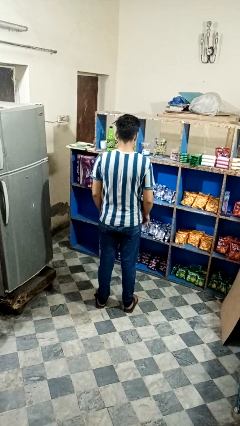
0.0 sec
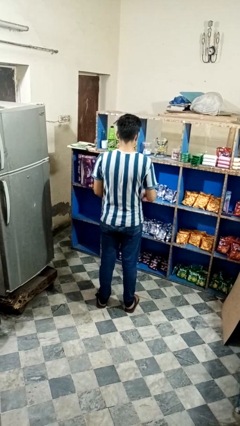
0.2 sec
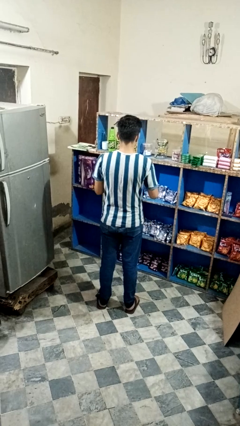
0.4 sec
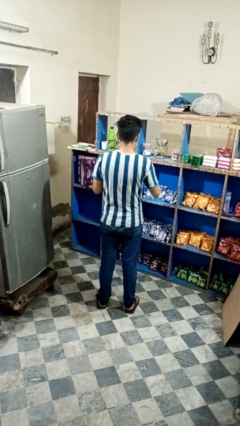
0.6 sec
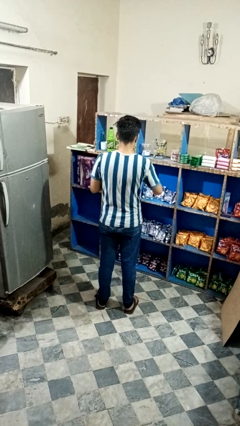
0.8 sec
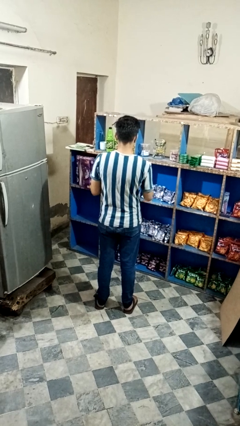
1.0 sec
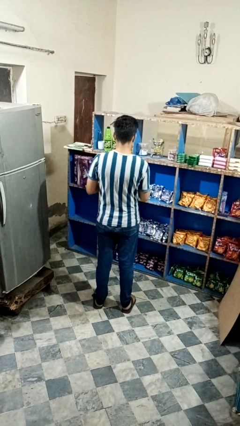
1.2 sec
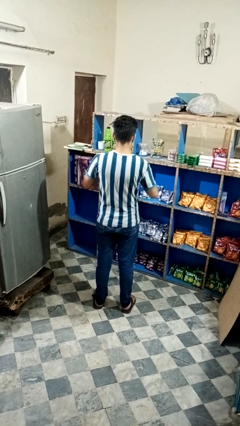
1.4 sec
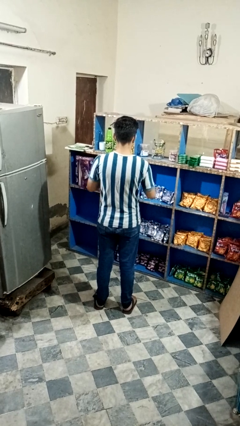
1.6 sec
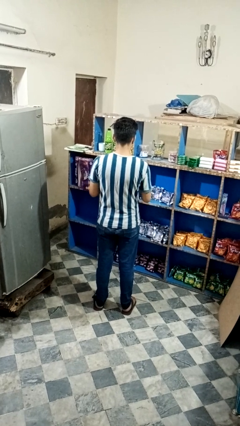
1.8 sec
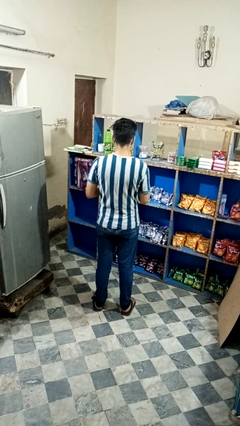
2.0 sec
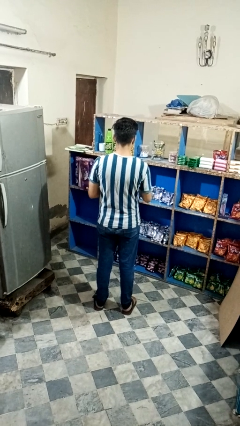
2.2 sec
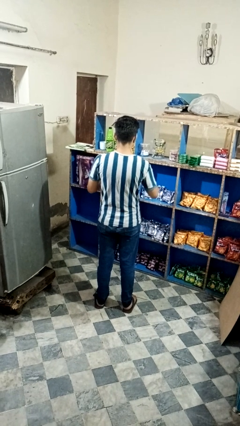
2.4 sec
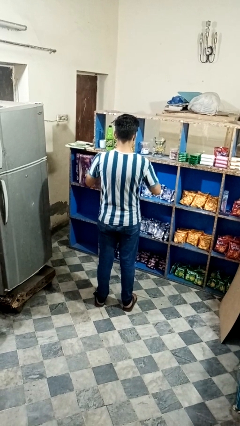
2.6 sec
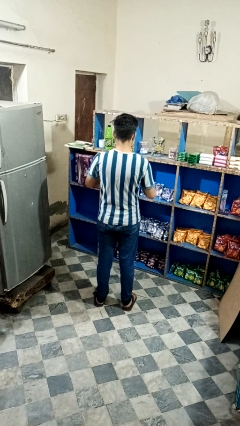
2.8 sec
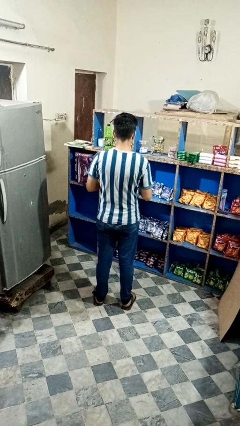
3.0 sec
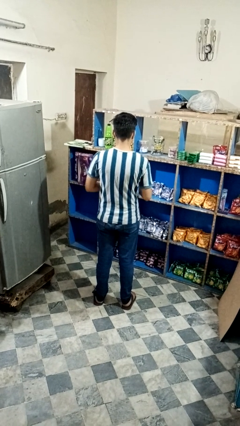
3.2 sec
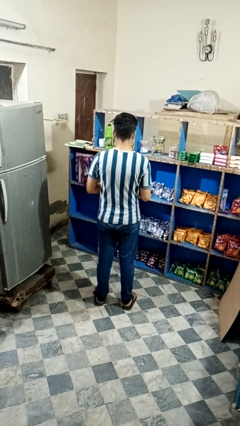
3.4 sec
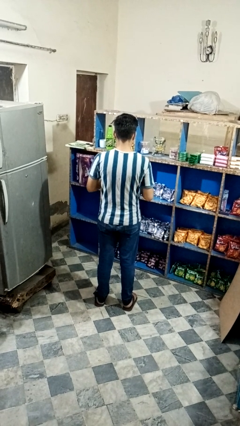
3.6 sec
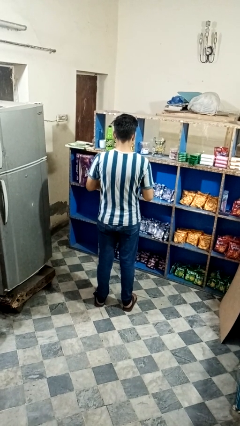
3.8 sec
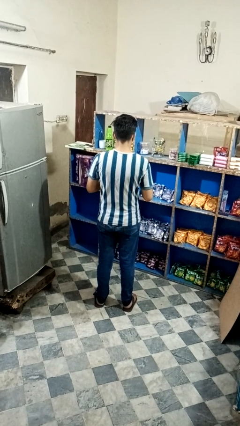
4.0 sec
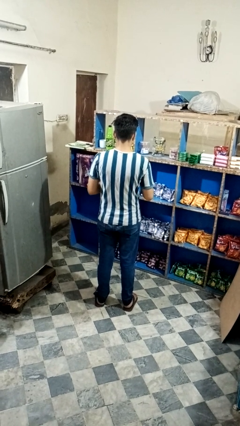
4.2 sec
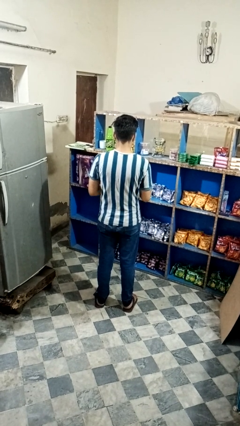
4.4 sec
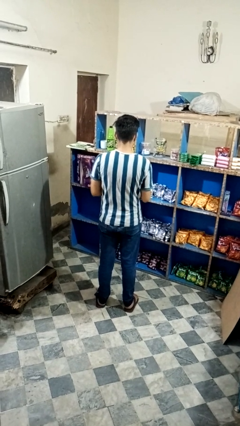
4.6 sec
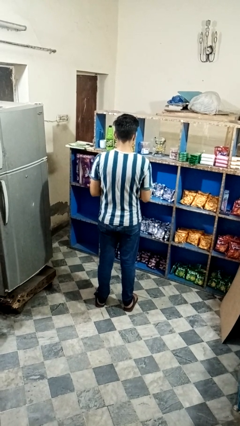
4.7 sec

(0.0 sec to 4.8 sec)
person squeezes object

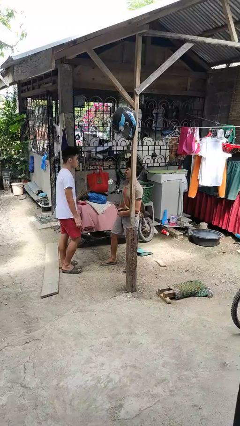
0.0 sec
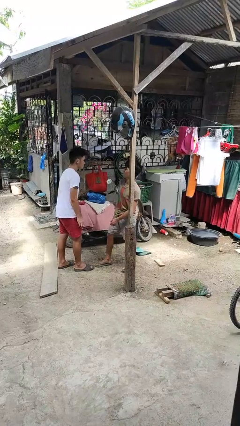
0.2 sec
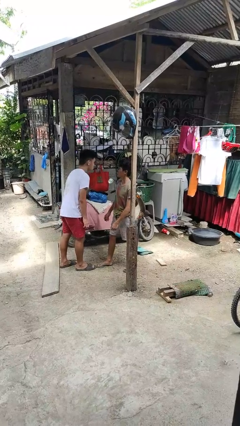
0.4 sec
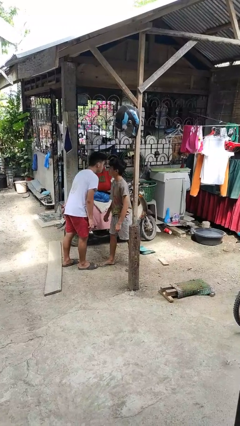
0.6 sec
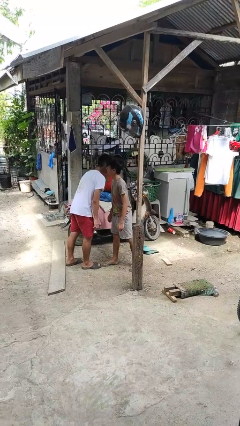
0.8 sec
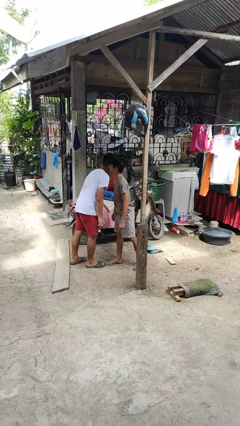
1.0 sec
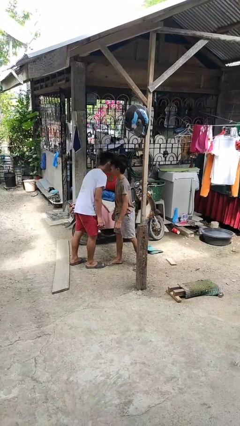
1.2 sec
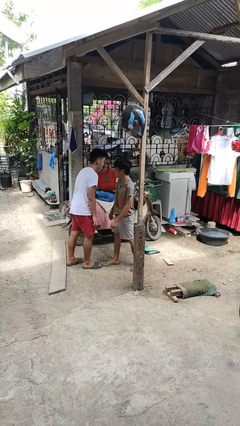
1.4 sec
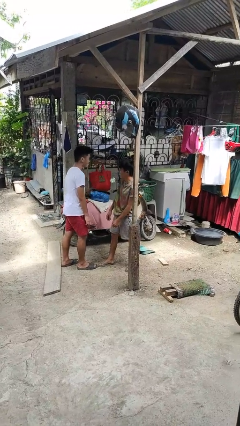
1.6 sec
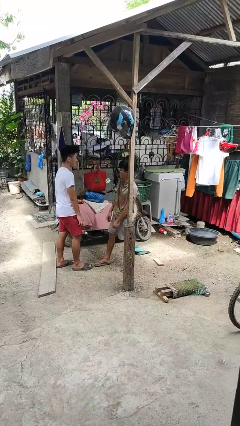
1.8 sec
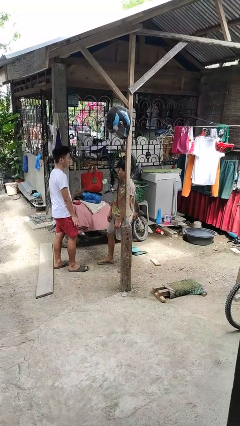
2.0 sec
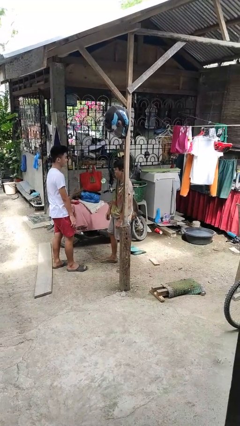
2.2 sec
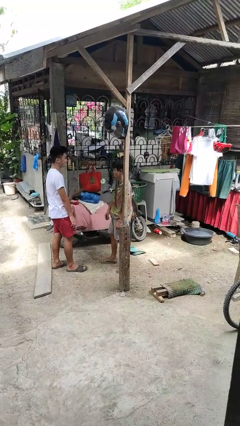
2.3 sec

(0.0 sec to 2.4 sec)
person kisses cheek of person

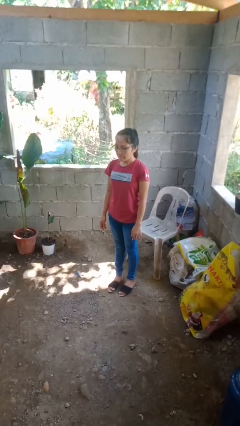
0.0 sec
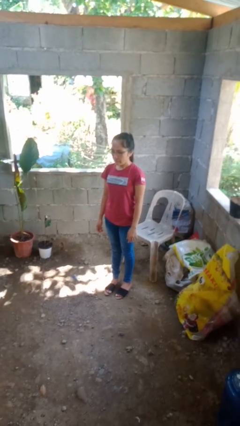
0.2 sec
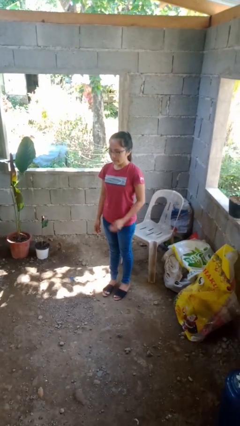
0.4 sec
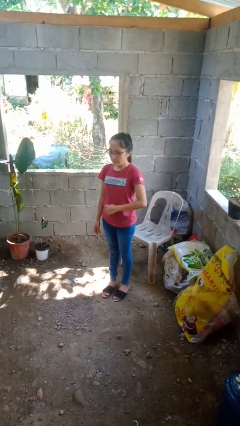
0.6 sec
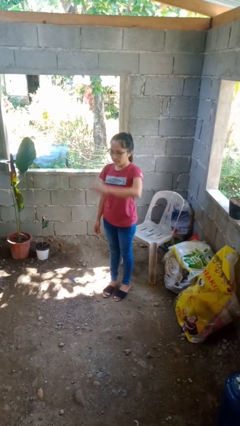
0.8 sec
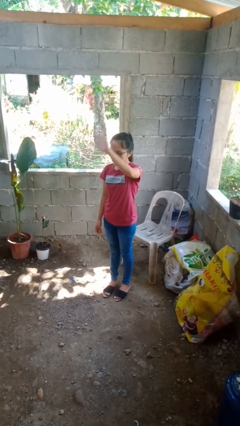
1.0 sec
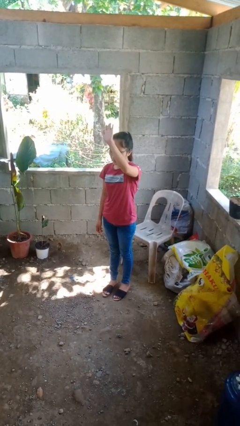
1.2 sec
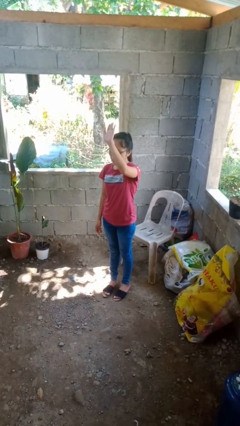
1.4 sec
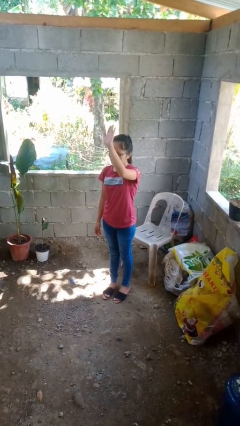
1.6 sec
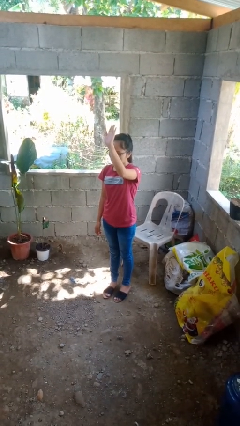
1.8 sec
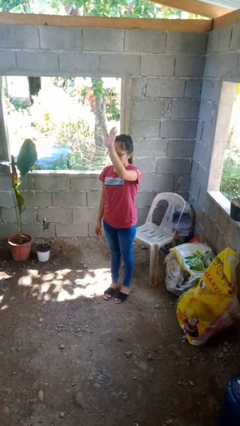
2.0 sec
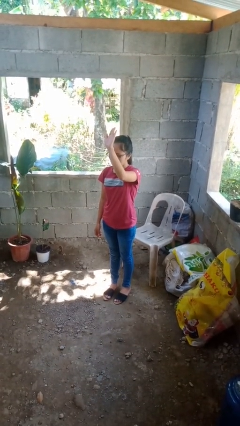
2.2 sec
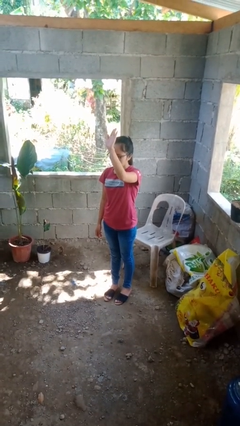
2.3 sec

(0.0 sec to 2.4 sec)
person gestures swipe up

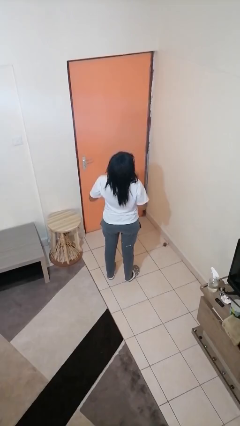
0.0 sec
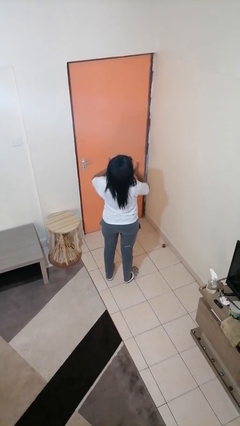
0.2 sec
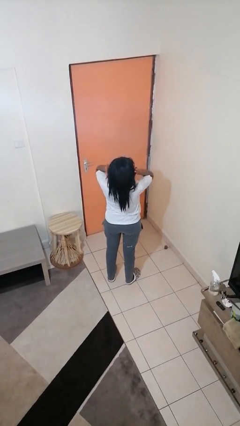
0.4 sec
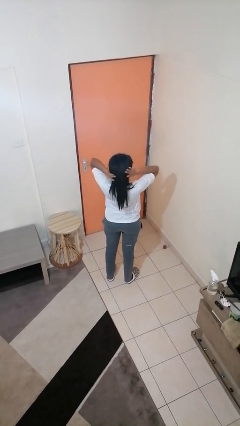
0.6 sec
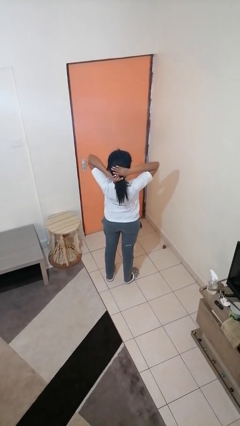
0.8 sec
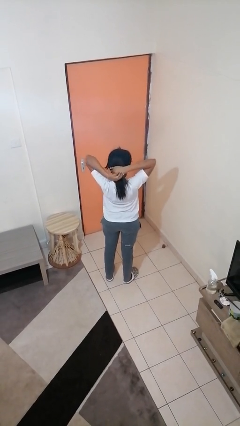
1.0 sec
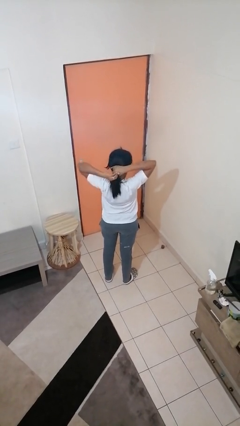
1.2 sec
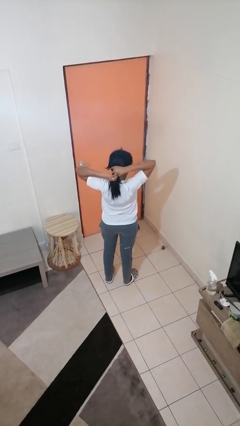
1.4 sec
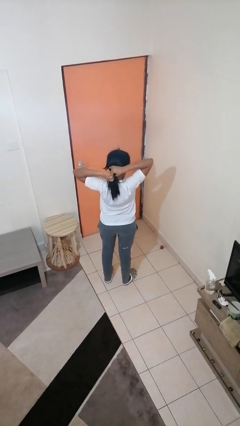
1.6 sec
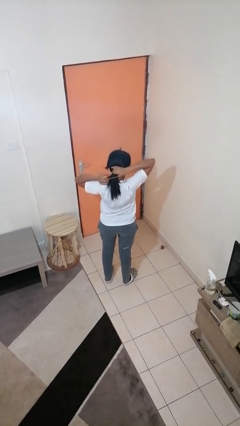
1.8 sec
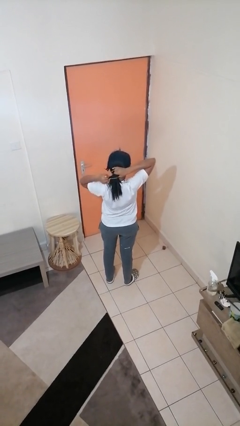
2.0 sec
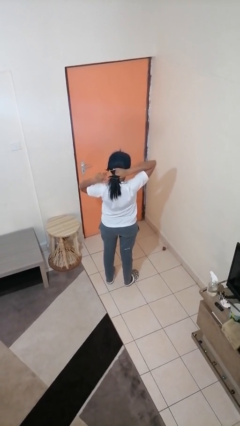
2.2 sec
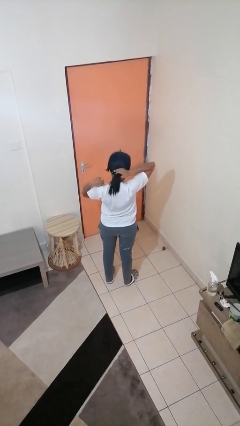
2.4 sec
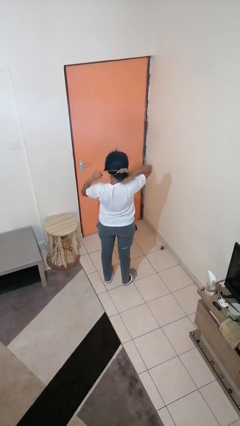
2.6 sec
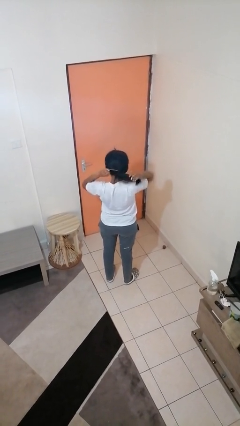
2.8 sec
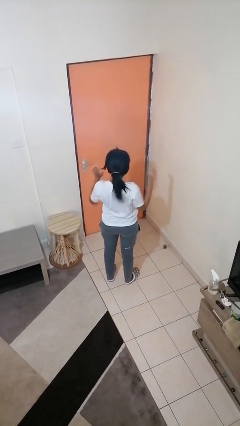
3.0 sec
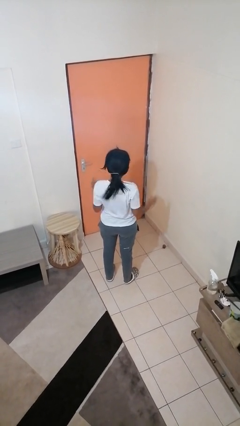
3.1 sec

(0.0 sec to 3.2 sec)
person puts hair in ponytail

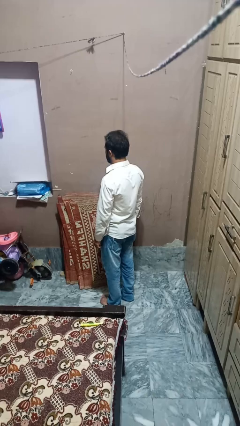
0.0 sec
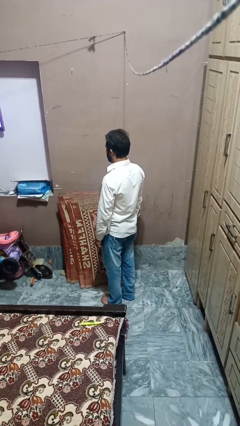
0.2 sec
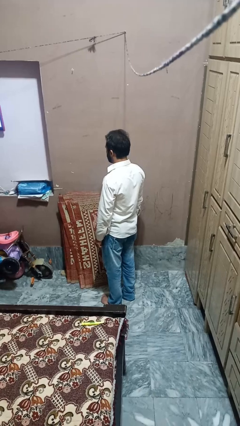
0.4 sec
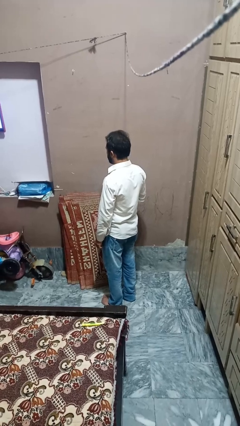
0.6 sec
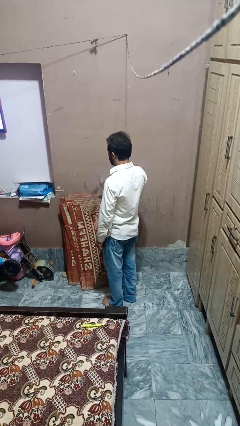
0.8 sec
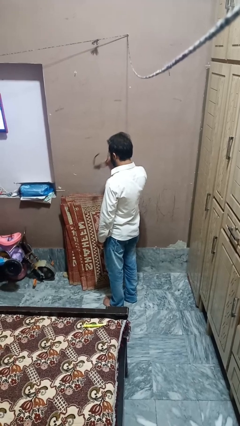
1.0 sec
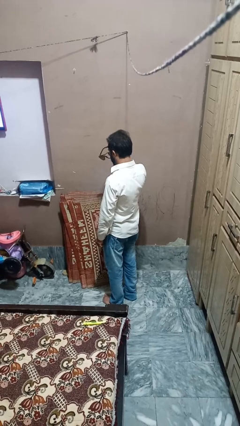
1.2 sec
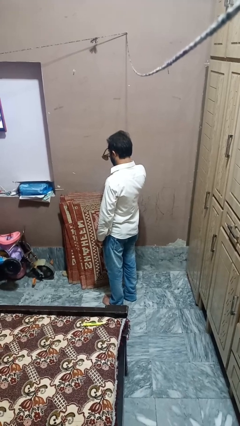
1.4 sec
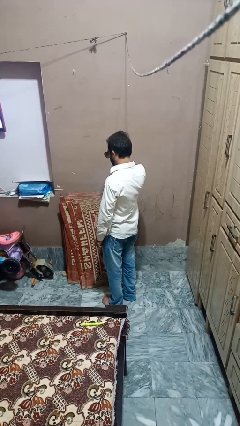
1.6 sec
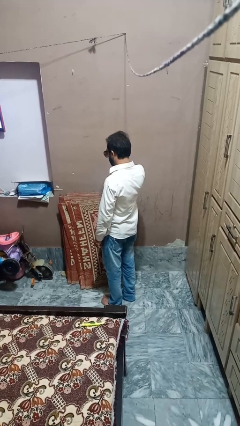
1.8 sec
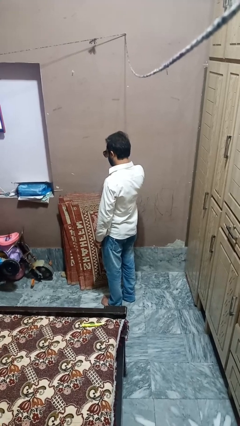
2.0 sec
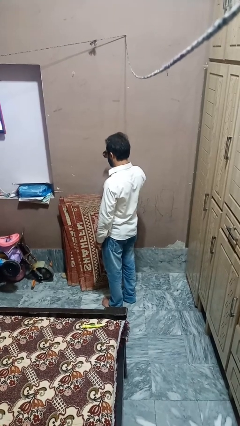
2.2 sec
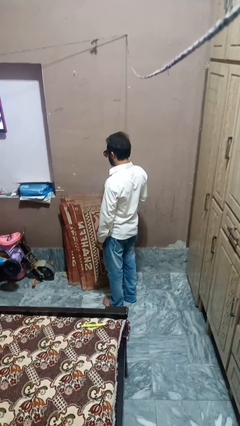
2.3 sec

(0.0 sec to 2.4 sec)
person puts on sunglasses

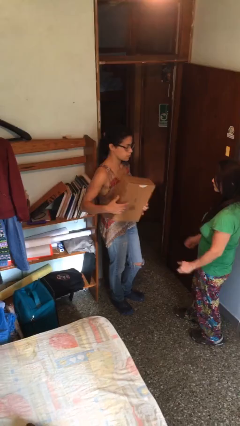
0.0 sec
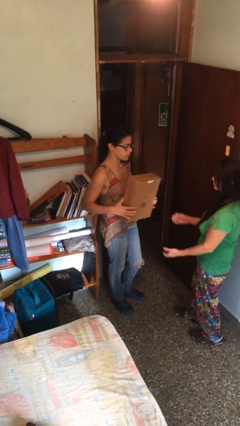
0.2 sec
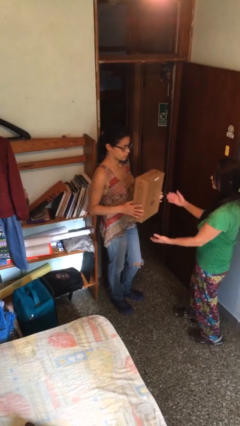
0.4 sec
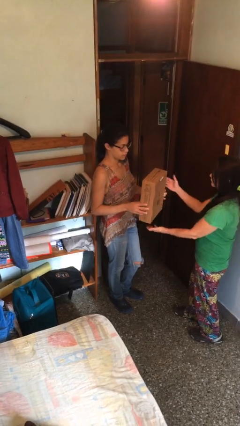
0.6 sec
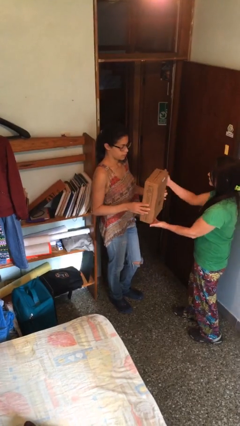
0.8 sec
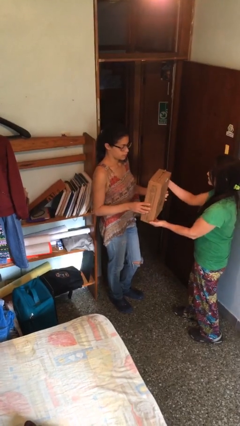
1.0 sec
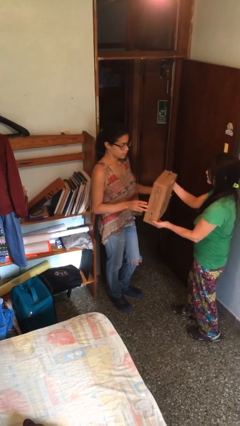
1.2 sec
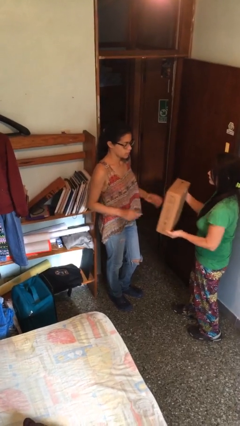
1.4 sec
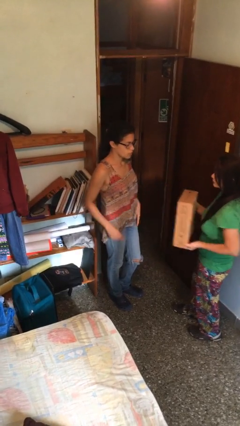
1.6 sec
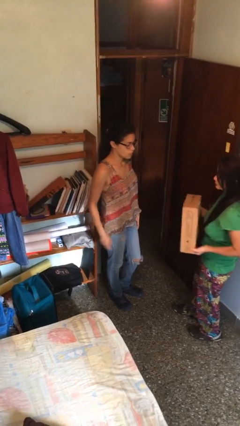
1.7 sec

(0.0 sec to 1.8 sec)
person transfers object to person

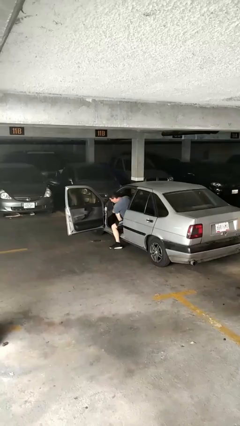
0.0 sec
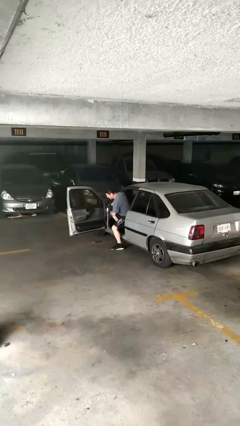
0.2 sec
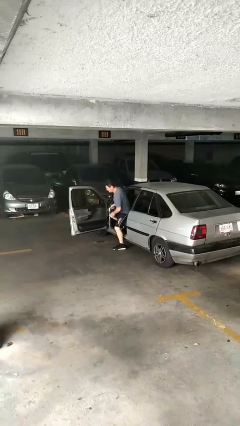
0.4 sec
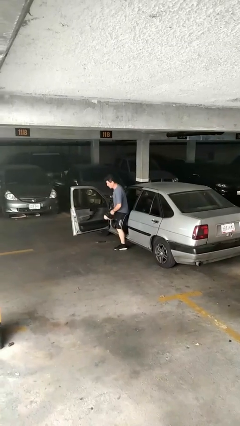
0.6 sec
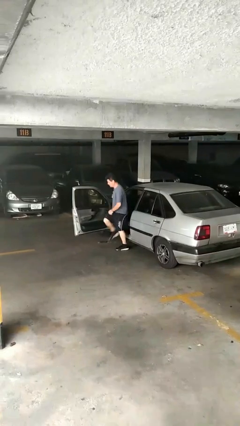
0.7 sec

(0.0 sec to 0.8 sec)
person exits car
